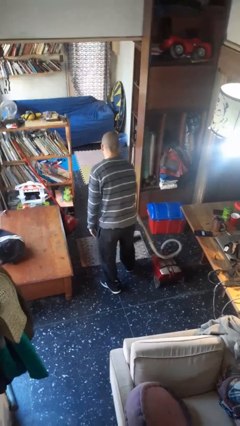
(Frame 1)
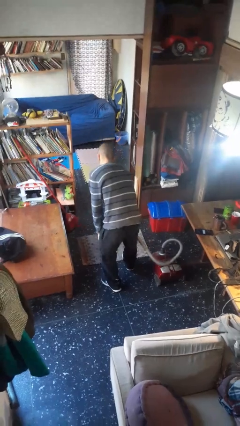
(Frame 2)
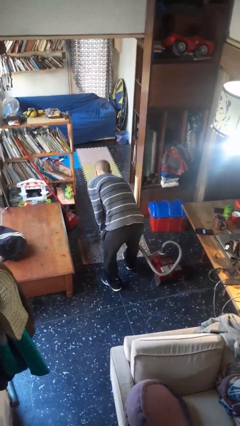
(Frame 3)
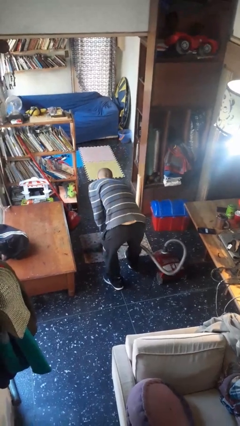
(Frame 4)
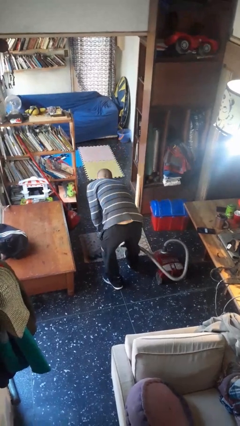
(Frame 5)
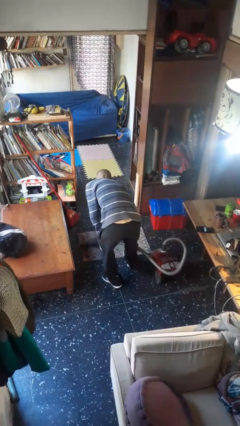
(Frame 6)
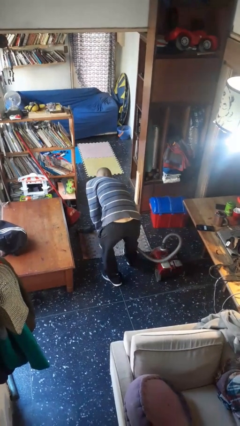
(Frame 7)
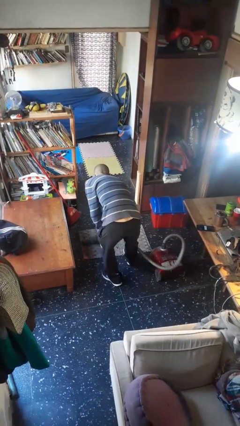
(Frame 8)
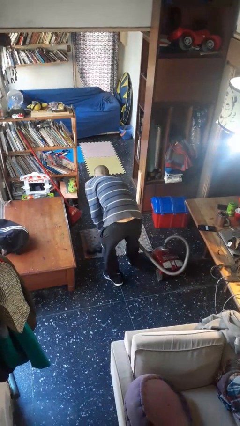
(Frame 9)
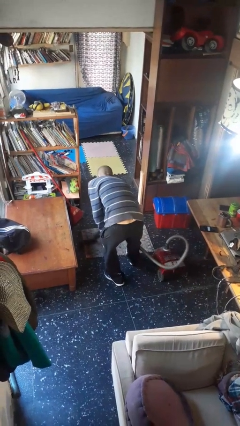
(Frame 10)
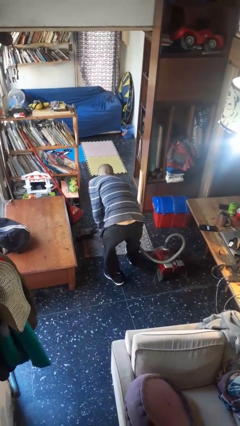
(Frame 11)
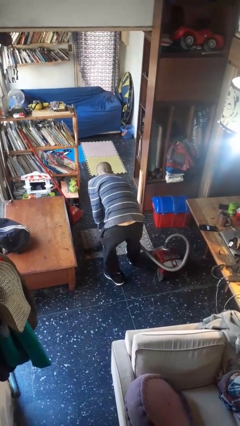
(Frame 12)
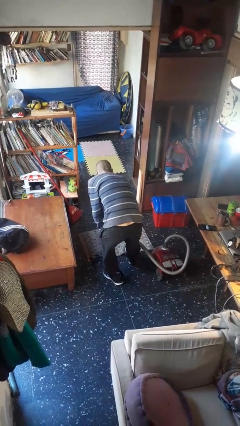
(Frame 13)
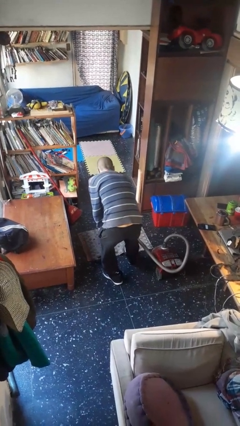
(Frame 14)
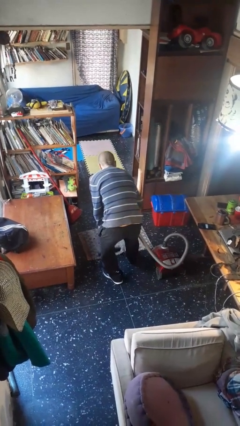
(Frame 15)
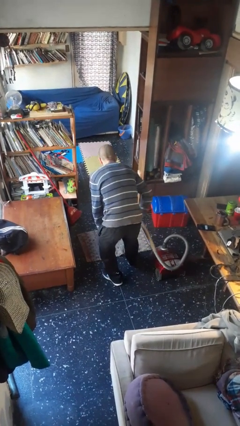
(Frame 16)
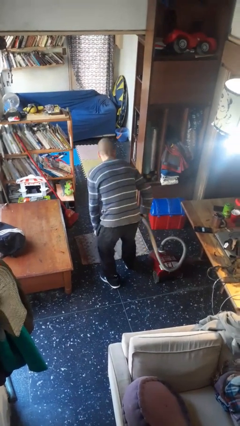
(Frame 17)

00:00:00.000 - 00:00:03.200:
person vacuums carpet

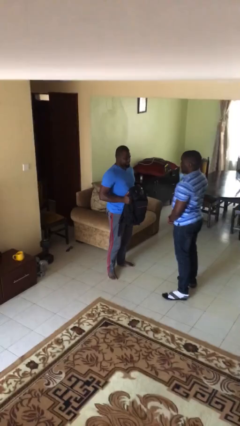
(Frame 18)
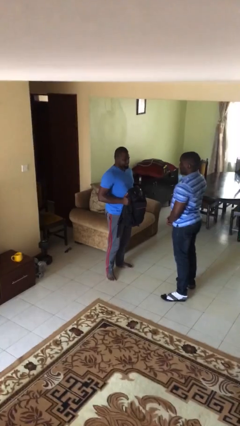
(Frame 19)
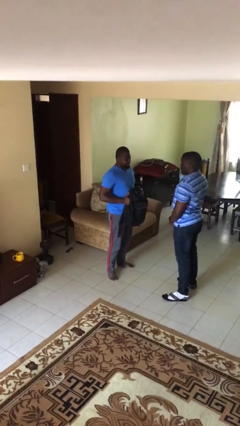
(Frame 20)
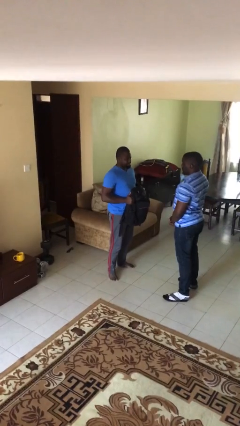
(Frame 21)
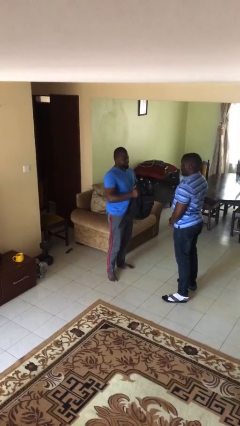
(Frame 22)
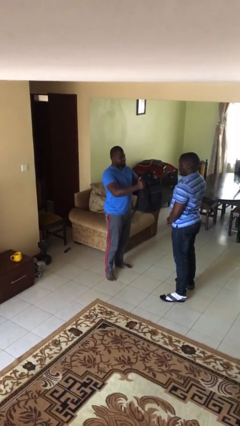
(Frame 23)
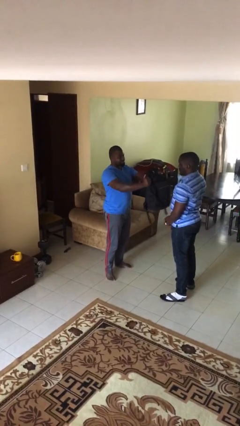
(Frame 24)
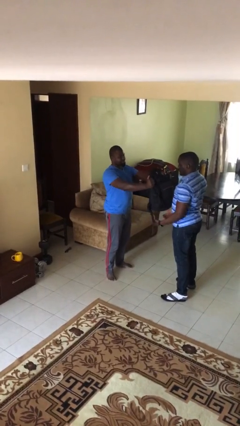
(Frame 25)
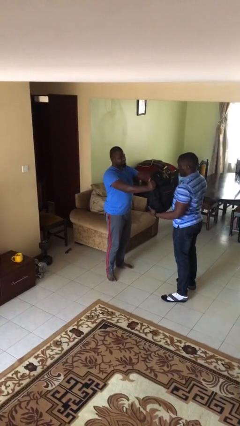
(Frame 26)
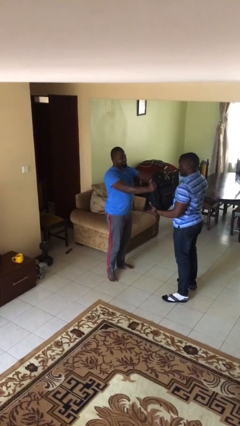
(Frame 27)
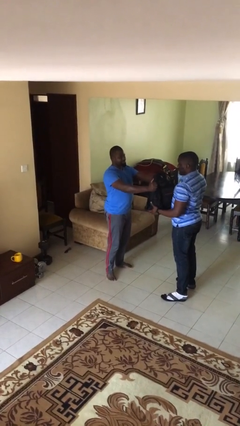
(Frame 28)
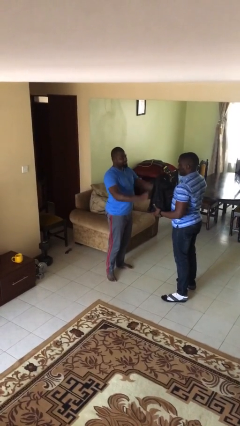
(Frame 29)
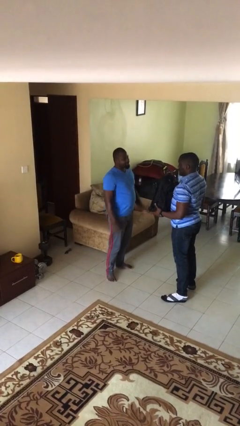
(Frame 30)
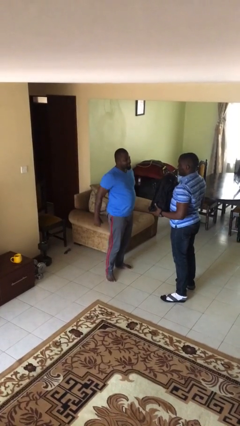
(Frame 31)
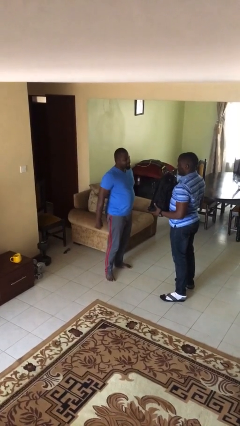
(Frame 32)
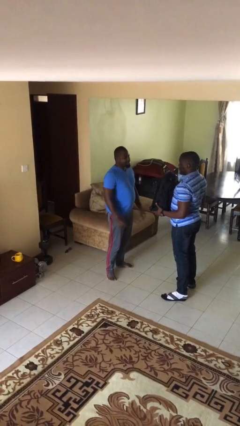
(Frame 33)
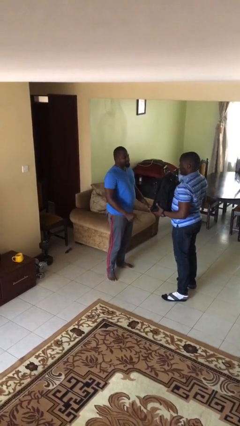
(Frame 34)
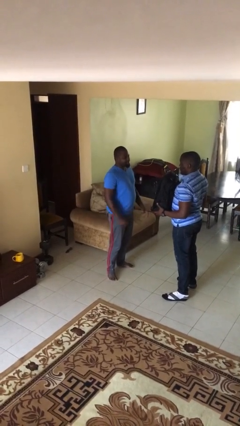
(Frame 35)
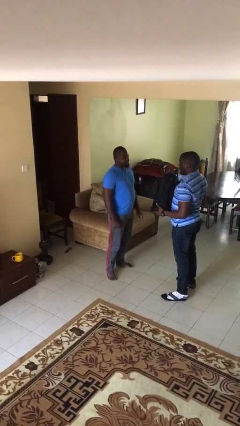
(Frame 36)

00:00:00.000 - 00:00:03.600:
person transfers object to person

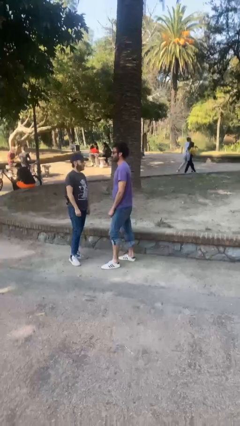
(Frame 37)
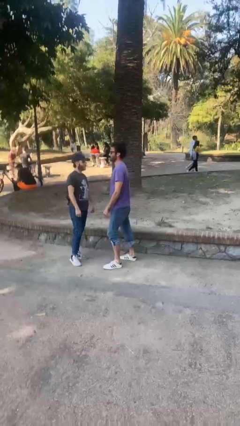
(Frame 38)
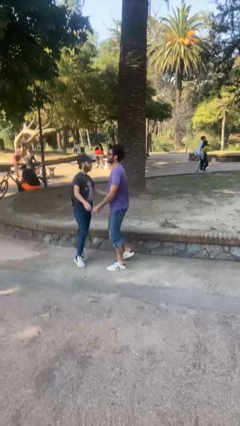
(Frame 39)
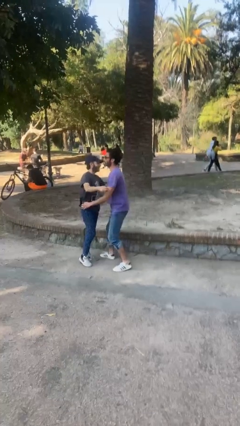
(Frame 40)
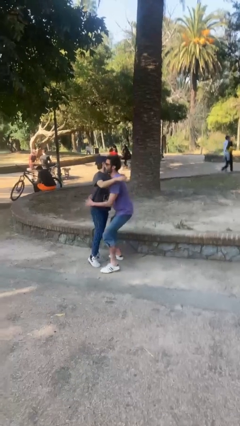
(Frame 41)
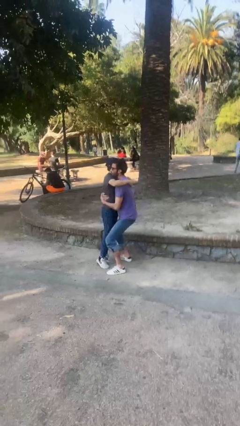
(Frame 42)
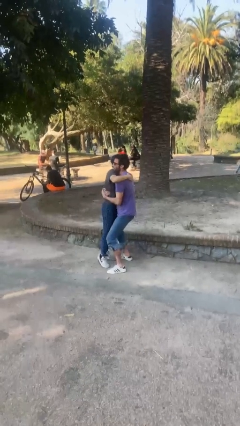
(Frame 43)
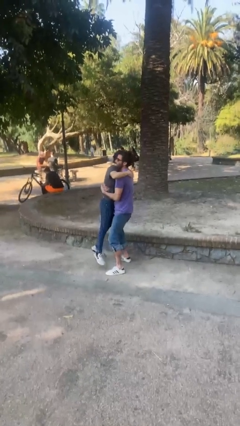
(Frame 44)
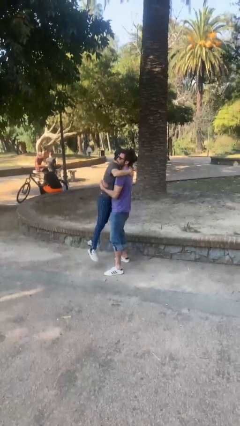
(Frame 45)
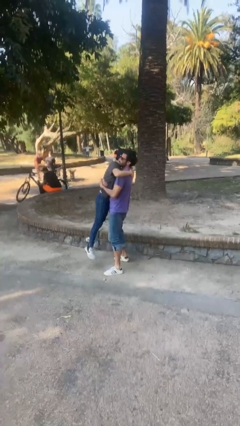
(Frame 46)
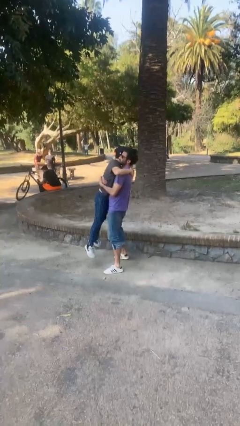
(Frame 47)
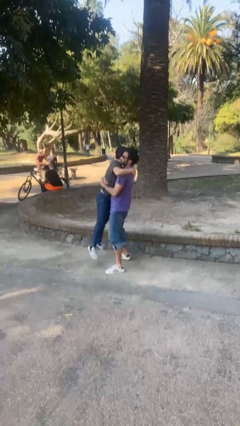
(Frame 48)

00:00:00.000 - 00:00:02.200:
person picks up person

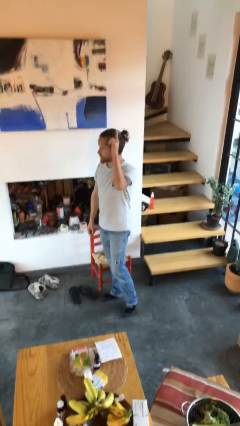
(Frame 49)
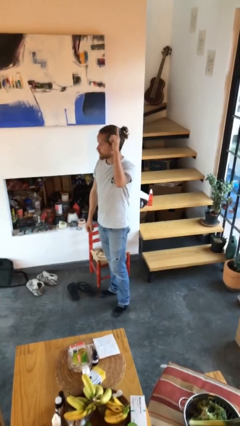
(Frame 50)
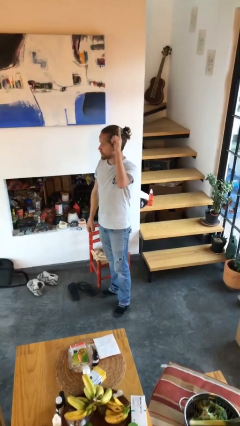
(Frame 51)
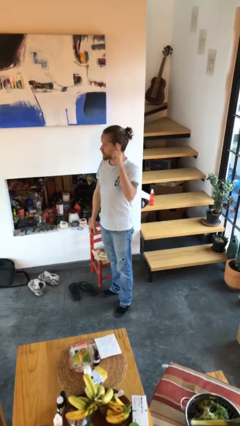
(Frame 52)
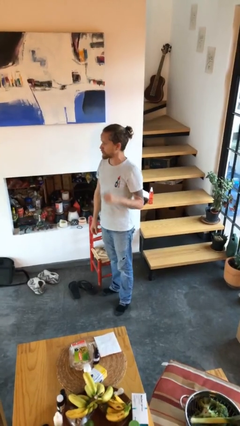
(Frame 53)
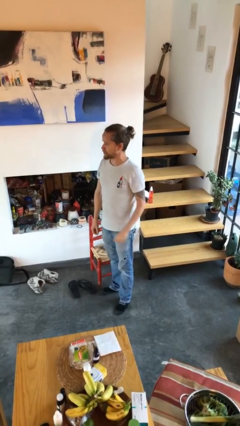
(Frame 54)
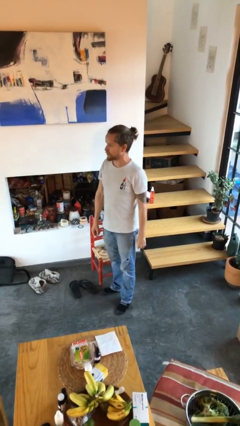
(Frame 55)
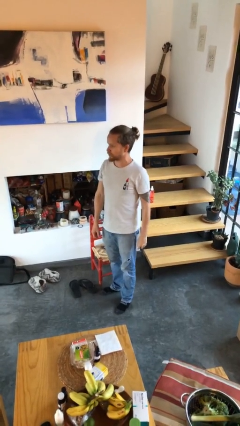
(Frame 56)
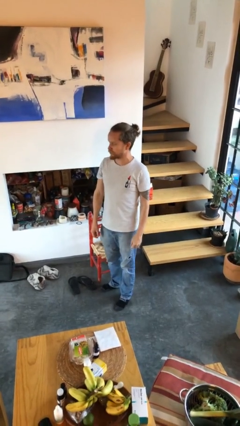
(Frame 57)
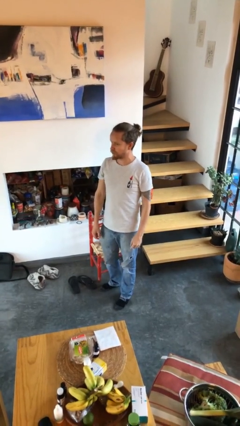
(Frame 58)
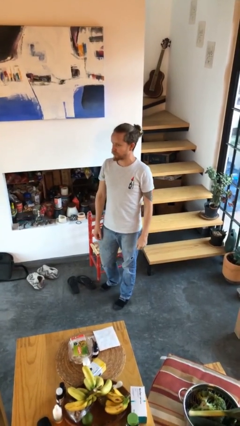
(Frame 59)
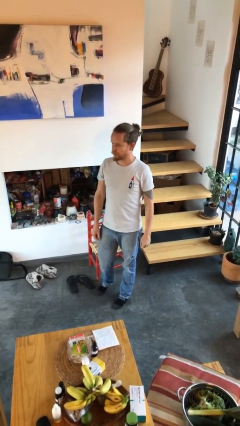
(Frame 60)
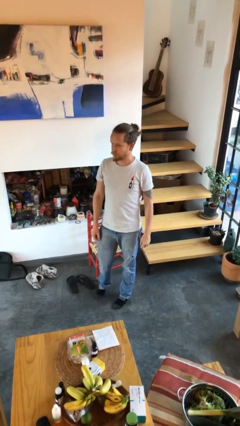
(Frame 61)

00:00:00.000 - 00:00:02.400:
person gestures lower hand

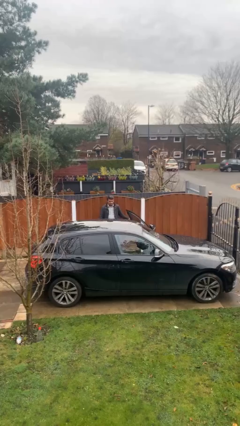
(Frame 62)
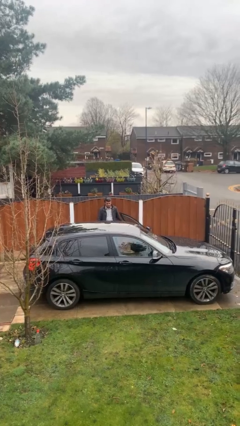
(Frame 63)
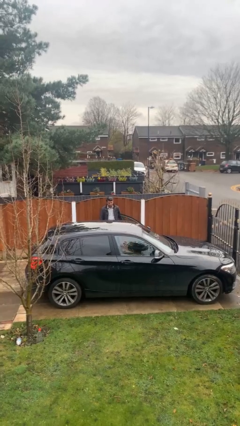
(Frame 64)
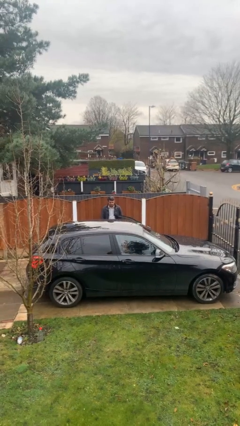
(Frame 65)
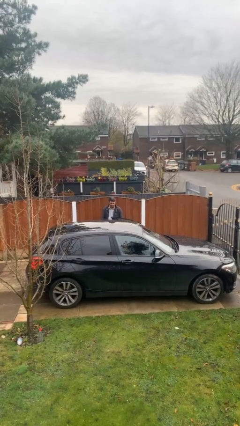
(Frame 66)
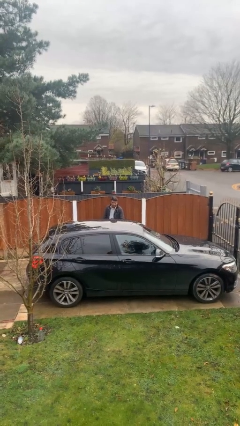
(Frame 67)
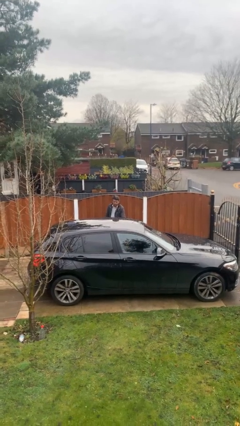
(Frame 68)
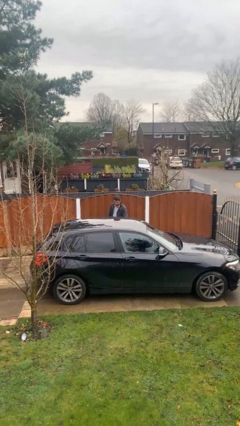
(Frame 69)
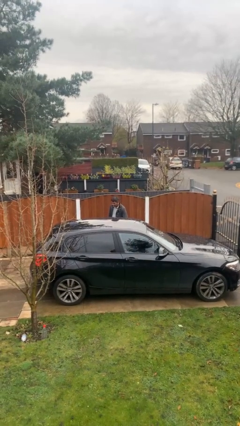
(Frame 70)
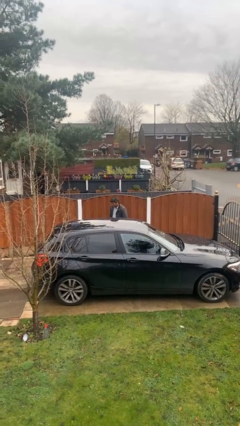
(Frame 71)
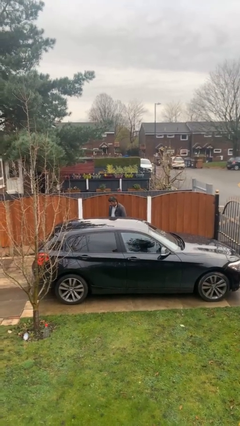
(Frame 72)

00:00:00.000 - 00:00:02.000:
person closes car door

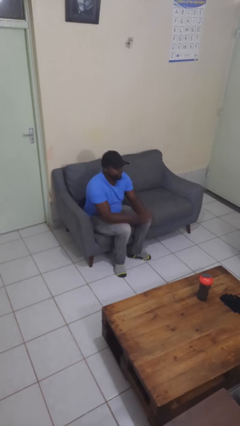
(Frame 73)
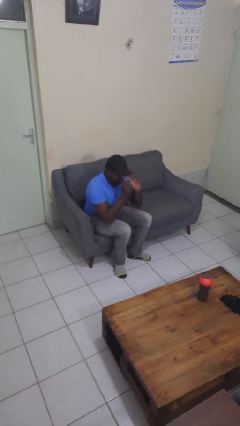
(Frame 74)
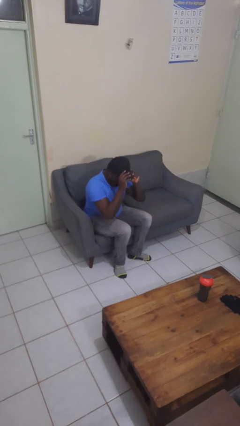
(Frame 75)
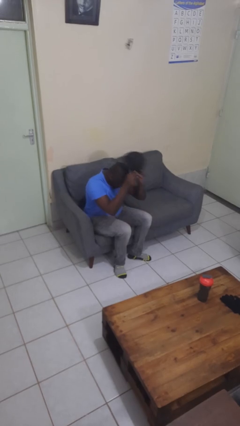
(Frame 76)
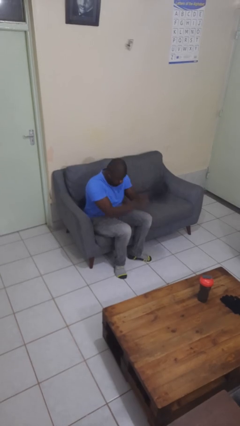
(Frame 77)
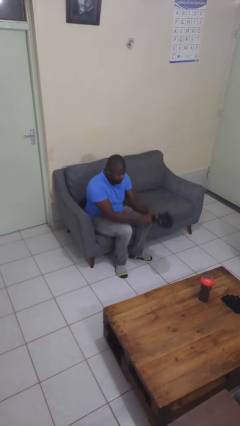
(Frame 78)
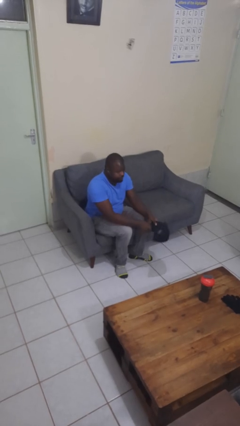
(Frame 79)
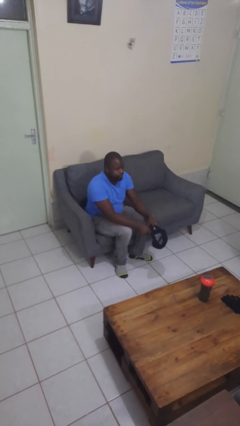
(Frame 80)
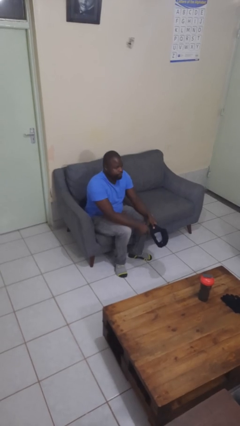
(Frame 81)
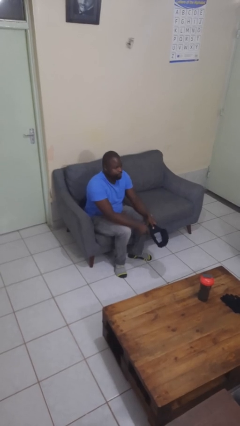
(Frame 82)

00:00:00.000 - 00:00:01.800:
person takes off hat

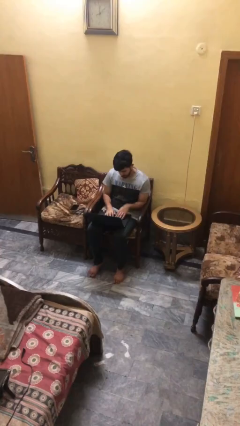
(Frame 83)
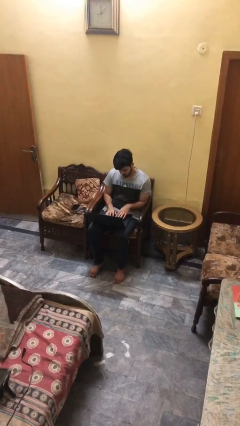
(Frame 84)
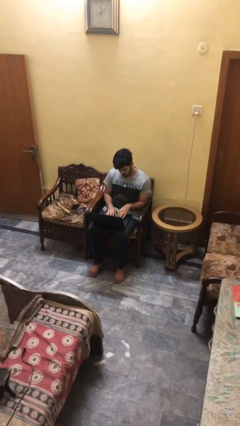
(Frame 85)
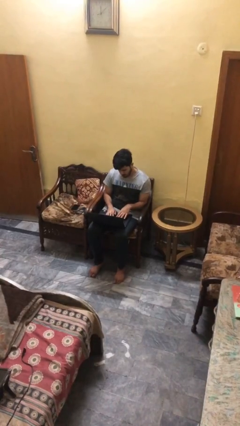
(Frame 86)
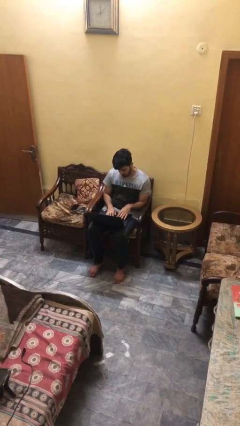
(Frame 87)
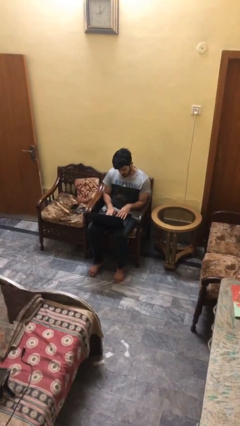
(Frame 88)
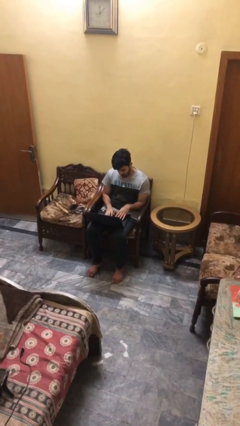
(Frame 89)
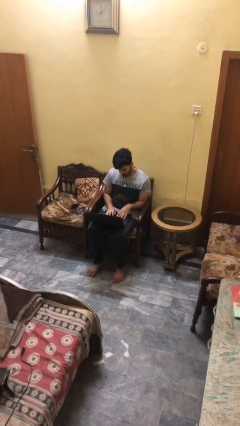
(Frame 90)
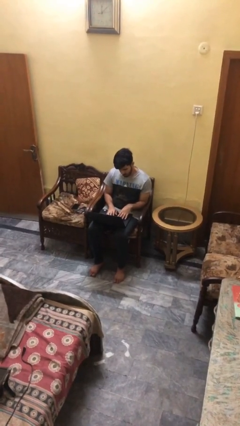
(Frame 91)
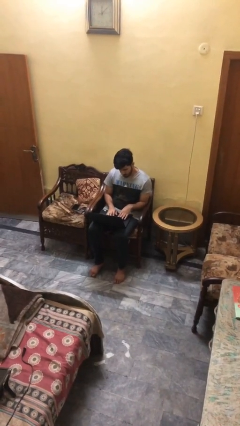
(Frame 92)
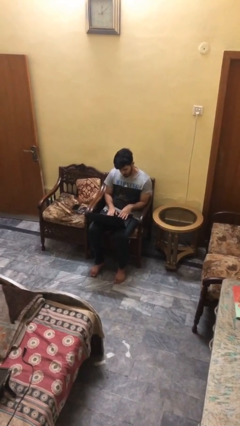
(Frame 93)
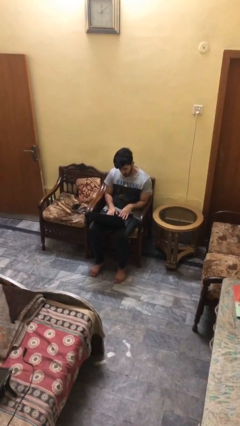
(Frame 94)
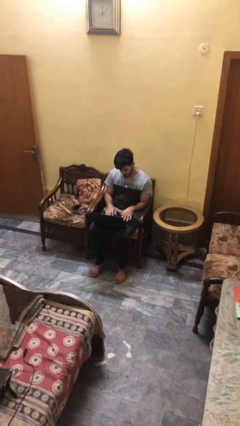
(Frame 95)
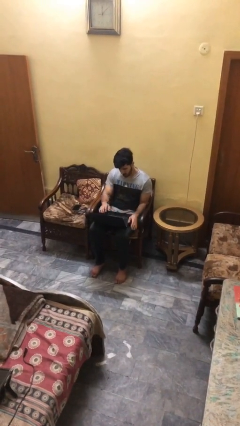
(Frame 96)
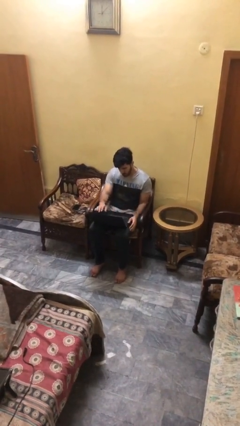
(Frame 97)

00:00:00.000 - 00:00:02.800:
person interacts with laptop
